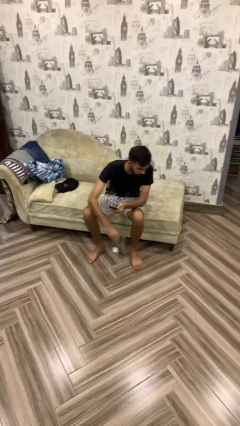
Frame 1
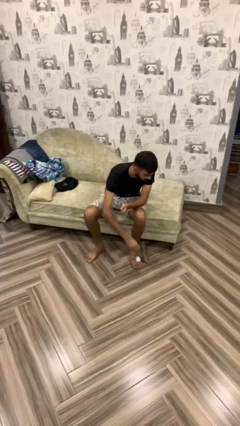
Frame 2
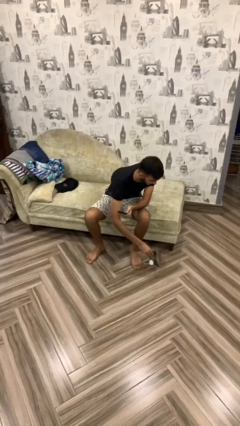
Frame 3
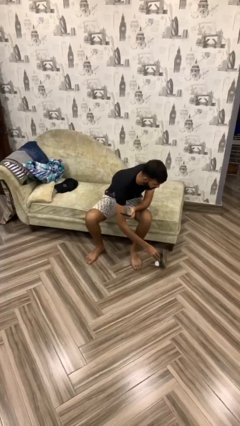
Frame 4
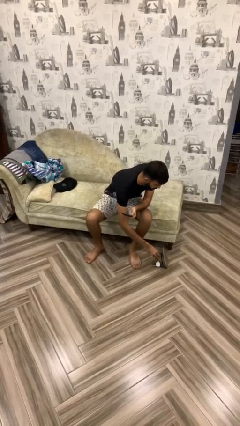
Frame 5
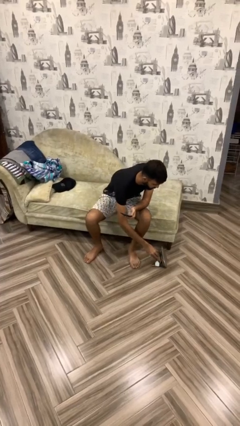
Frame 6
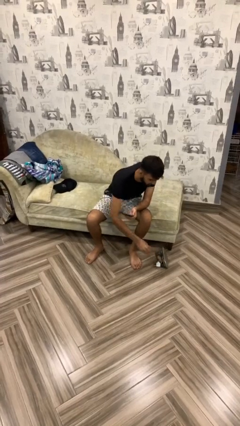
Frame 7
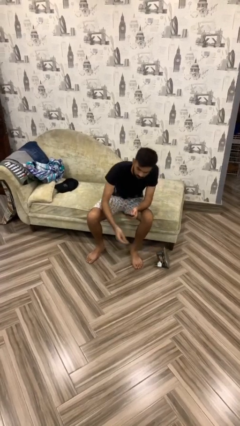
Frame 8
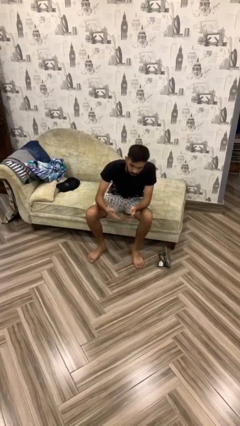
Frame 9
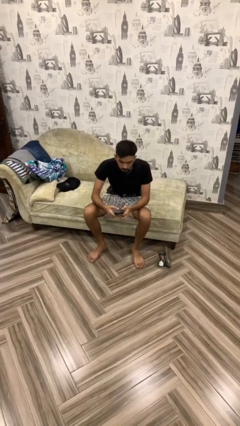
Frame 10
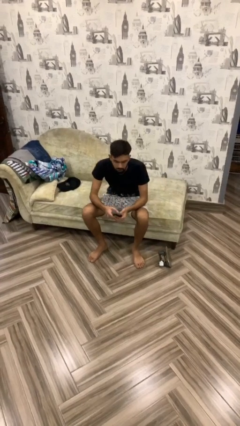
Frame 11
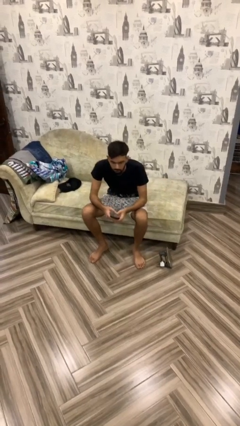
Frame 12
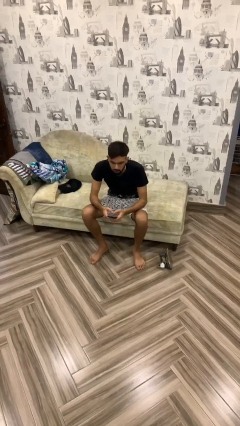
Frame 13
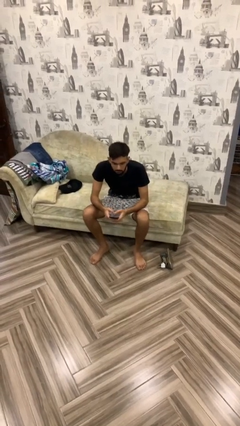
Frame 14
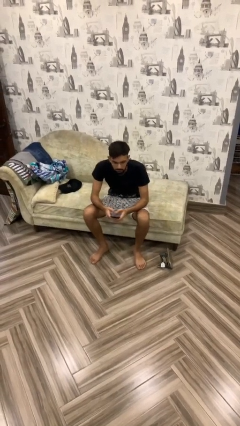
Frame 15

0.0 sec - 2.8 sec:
person puts down object on floor

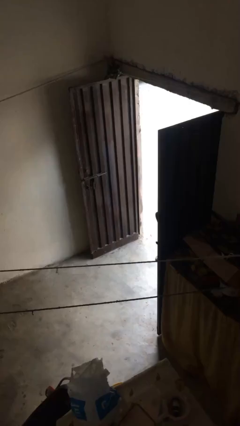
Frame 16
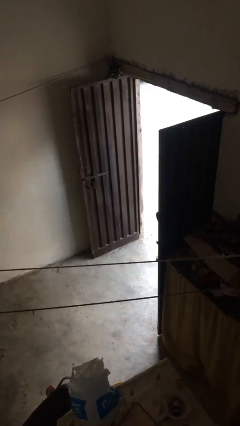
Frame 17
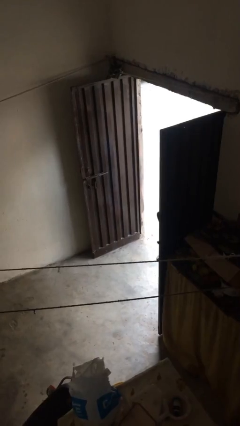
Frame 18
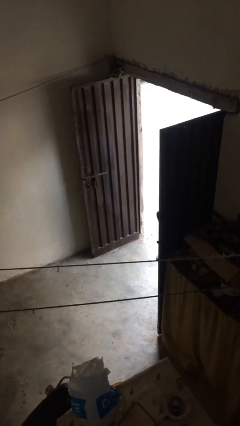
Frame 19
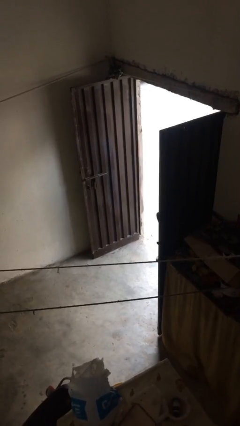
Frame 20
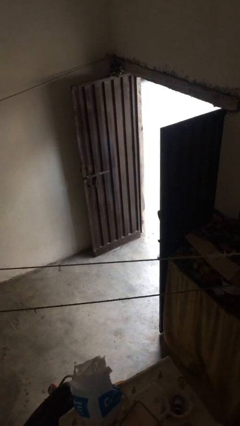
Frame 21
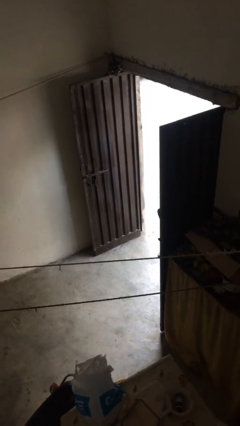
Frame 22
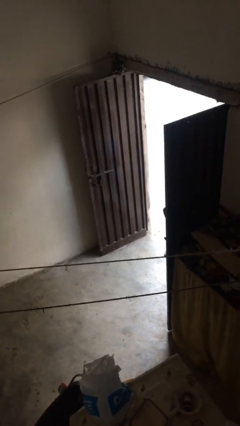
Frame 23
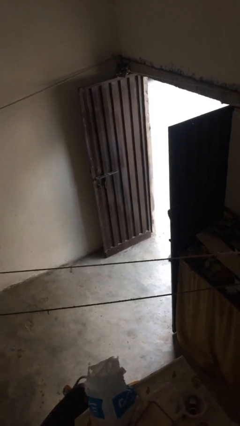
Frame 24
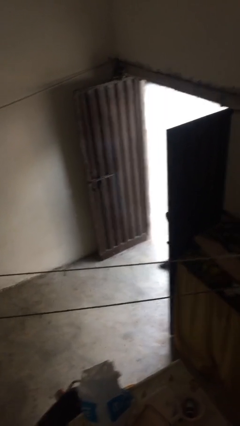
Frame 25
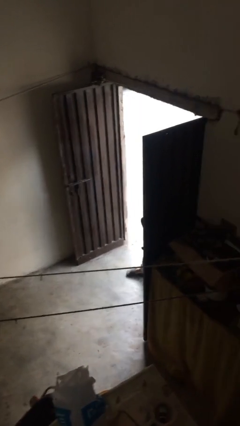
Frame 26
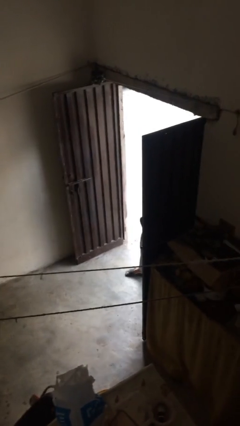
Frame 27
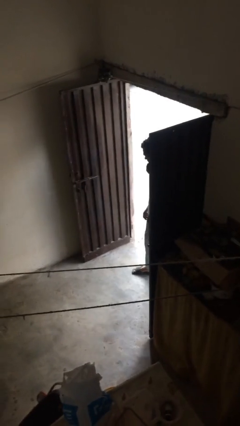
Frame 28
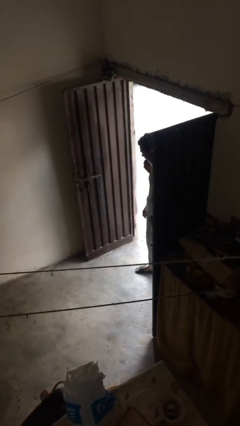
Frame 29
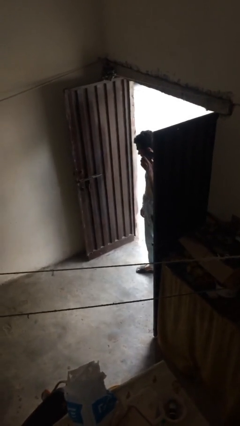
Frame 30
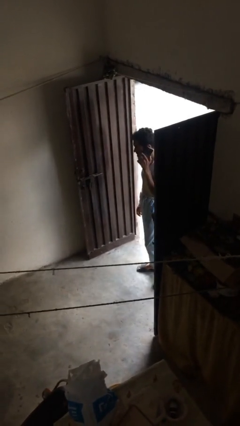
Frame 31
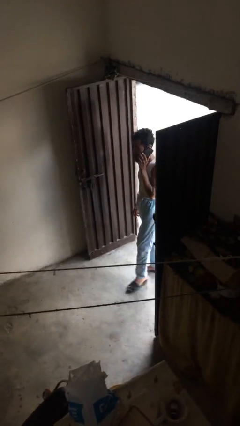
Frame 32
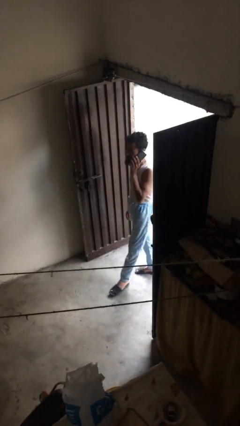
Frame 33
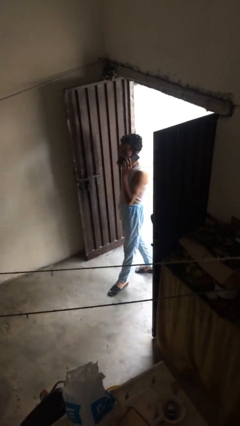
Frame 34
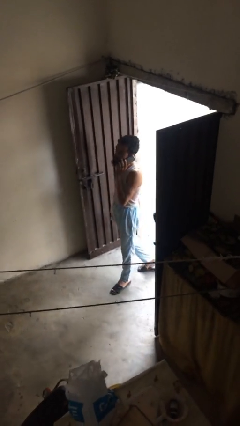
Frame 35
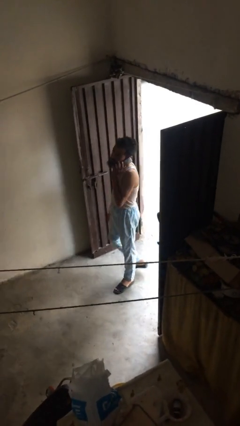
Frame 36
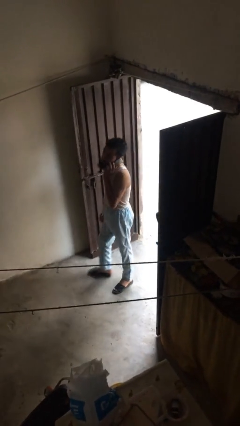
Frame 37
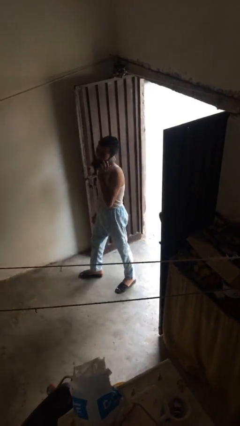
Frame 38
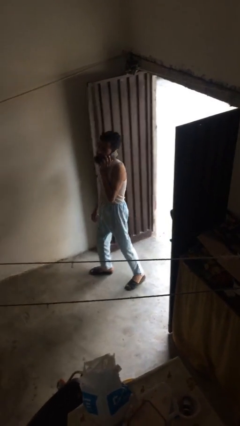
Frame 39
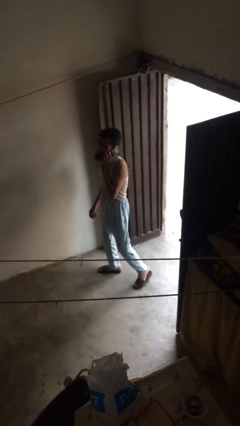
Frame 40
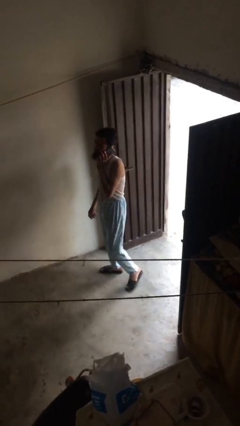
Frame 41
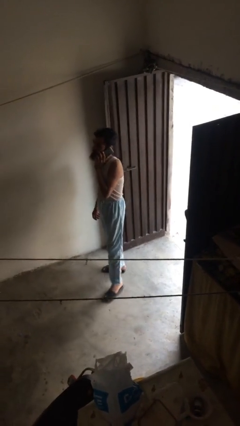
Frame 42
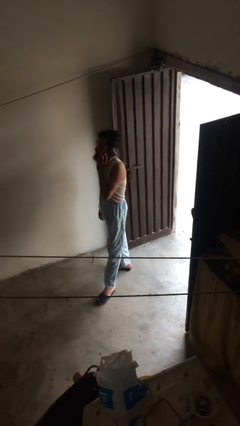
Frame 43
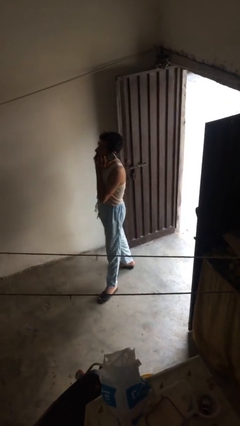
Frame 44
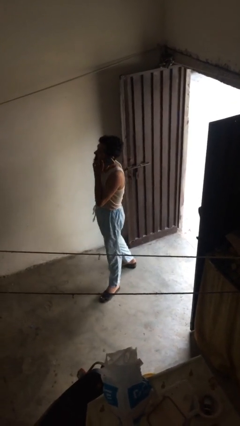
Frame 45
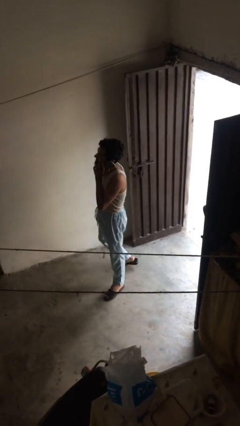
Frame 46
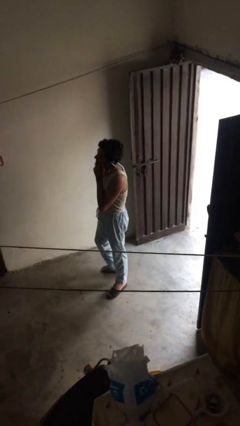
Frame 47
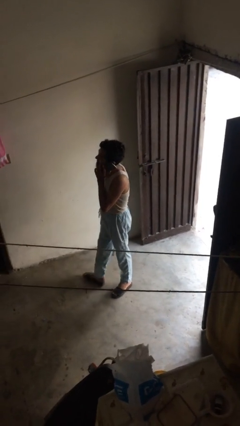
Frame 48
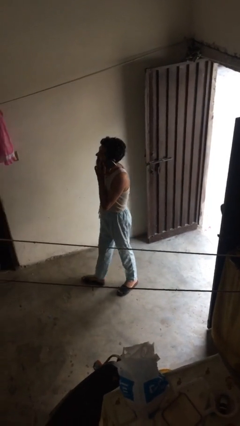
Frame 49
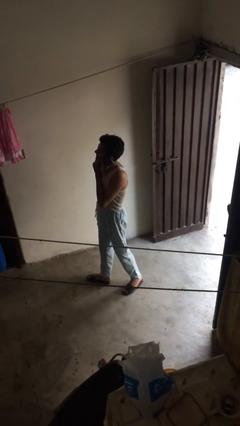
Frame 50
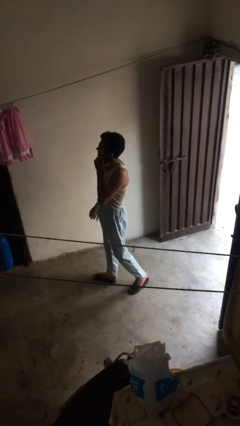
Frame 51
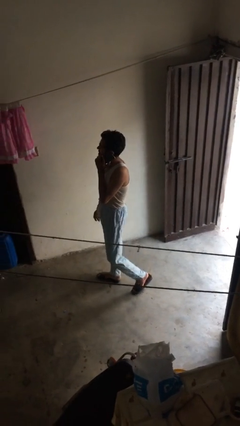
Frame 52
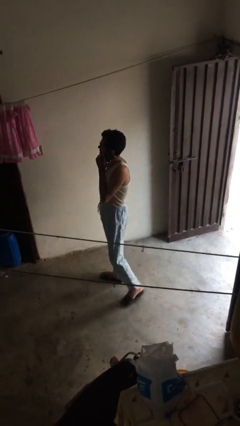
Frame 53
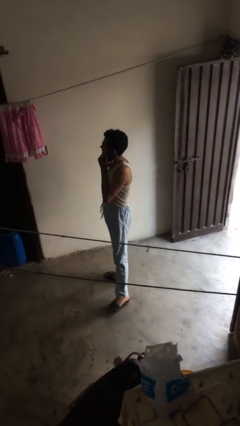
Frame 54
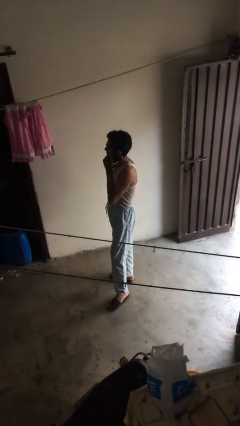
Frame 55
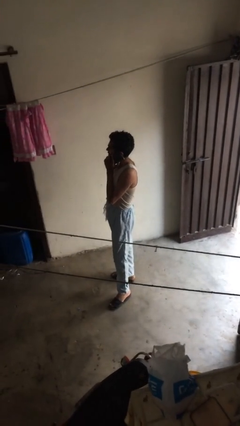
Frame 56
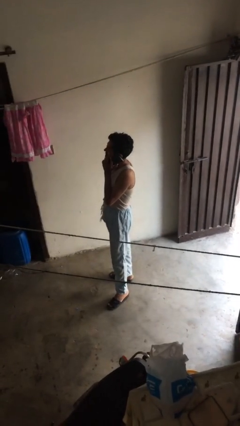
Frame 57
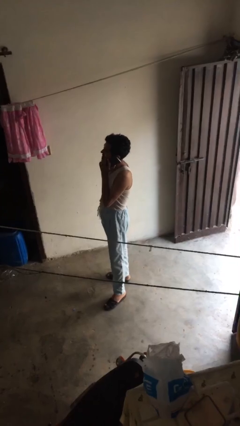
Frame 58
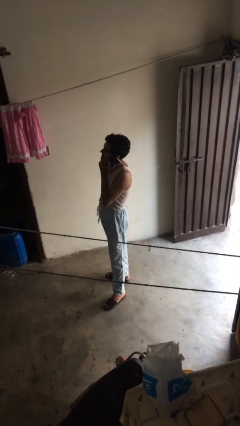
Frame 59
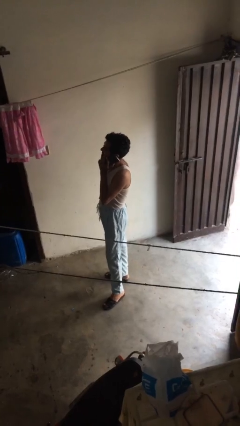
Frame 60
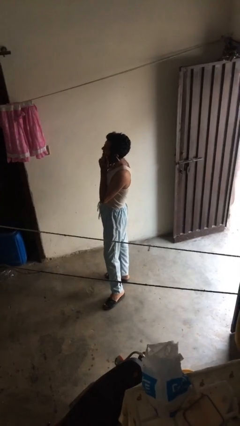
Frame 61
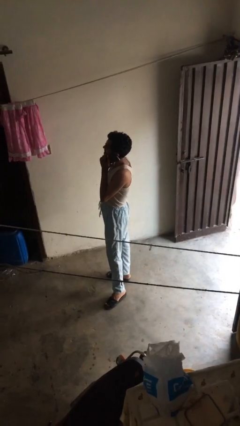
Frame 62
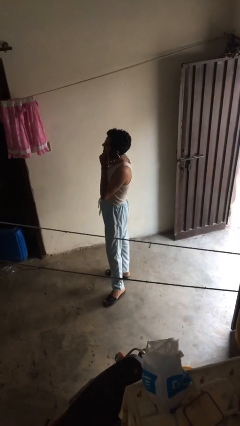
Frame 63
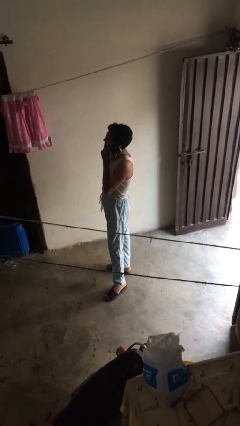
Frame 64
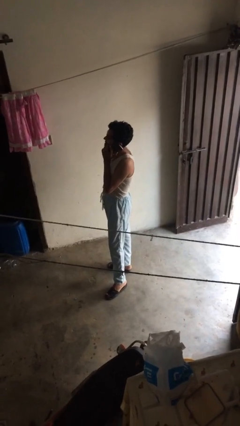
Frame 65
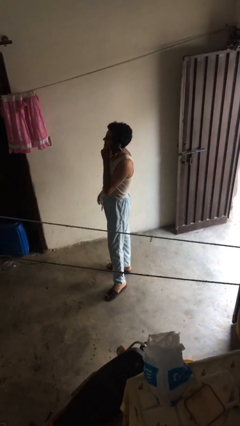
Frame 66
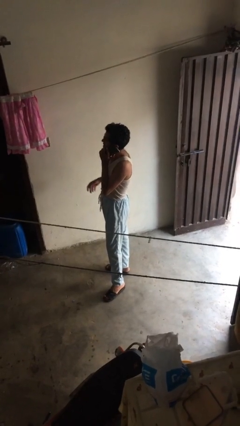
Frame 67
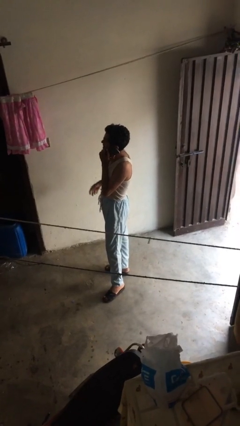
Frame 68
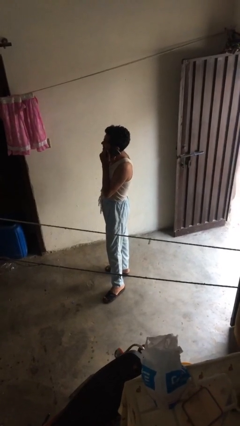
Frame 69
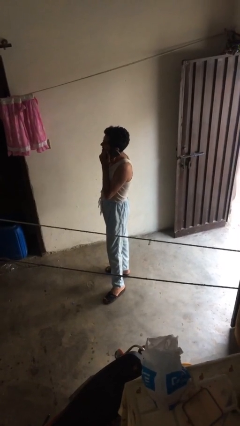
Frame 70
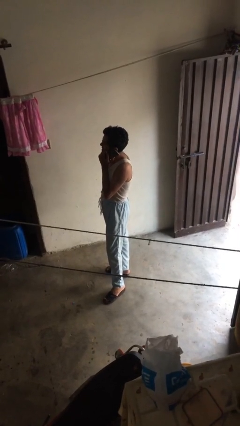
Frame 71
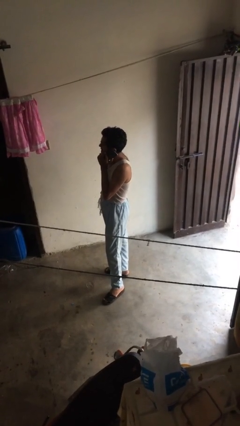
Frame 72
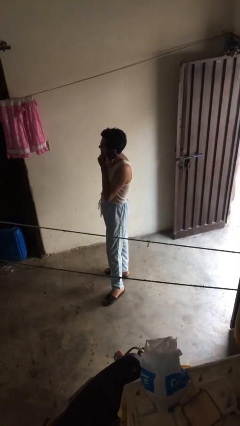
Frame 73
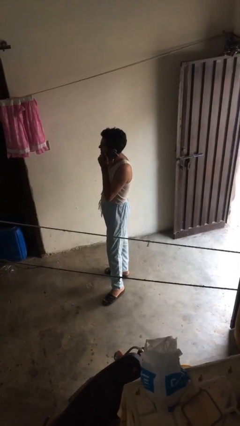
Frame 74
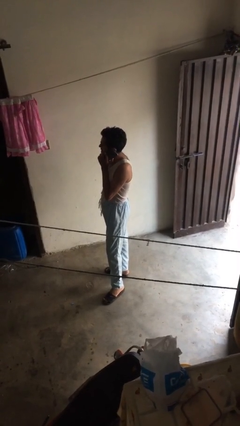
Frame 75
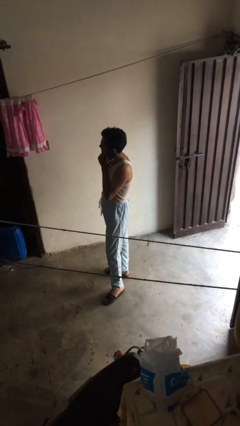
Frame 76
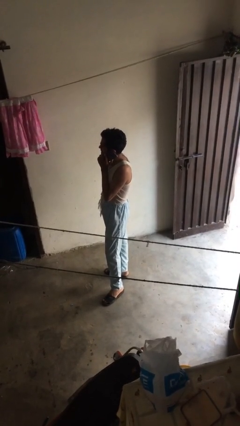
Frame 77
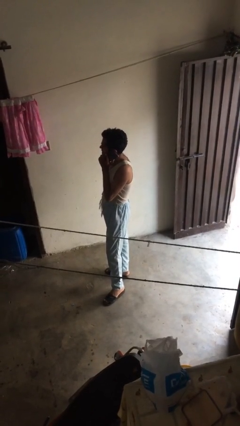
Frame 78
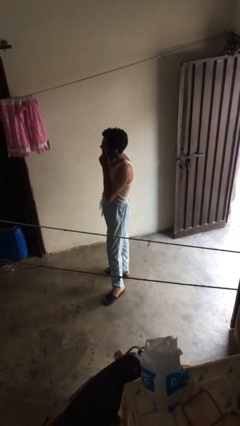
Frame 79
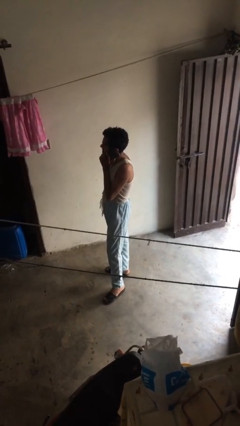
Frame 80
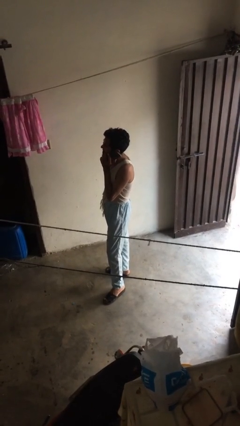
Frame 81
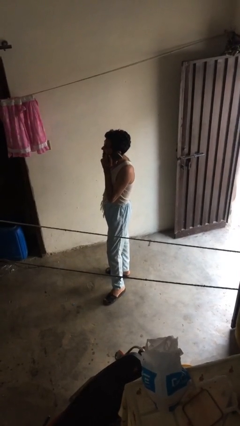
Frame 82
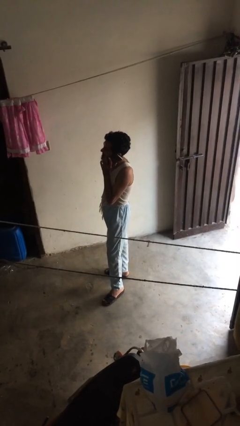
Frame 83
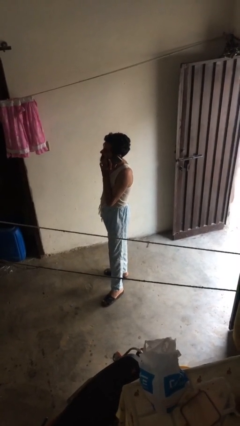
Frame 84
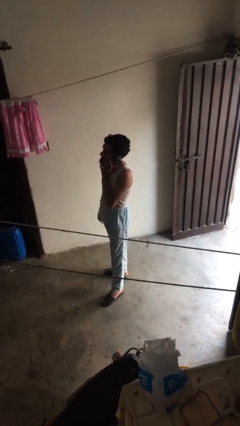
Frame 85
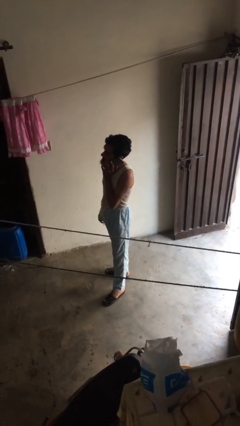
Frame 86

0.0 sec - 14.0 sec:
person enters scene through structure

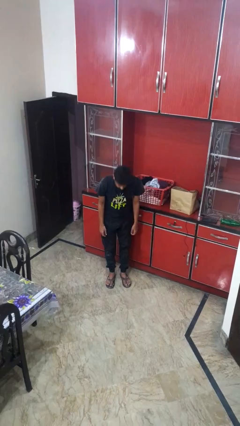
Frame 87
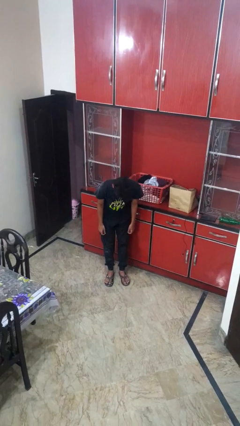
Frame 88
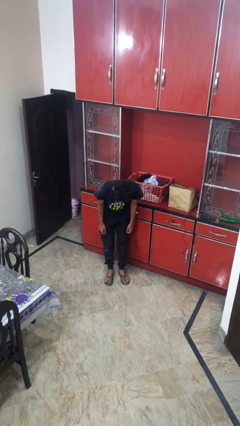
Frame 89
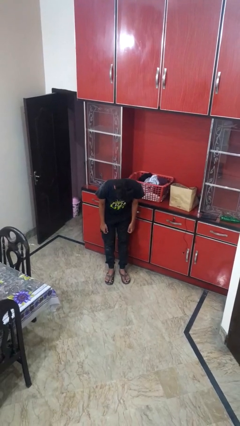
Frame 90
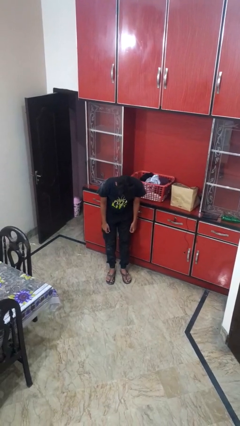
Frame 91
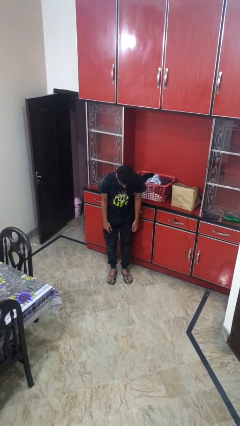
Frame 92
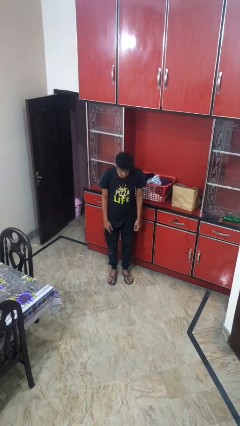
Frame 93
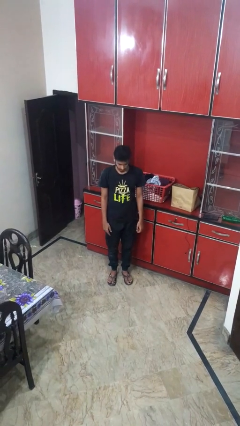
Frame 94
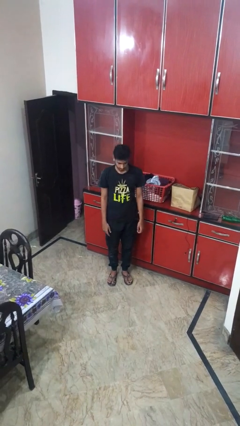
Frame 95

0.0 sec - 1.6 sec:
person bows
